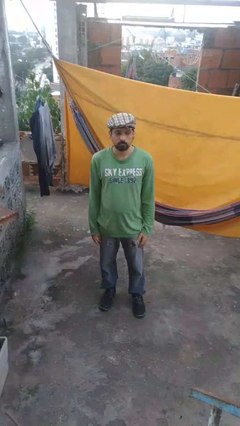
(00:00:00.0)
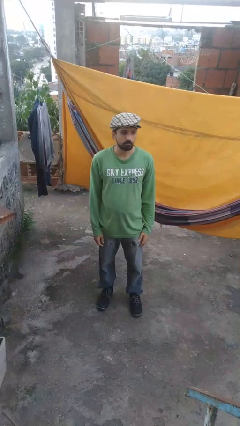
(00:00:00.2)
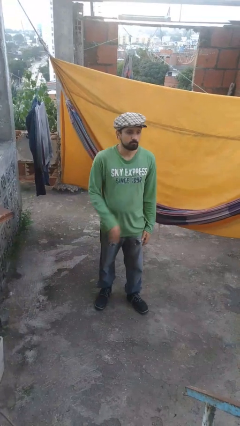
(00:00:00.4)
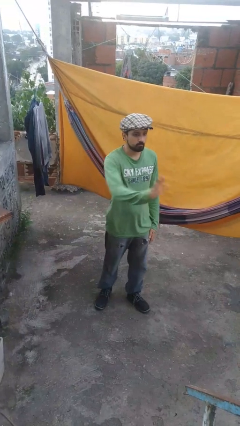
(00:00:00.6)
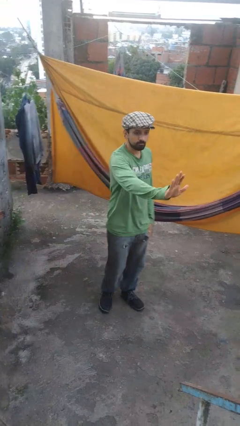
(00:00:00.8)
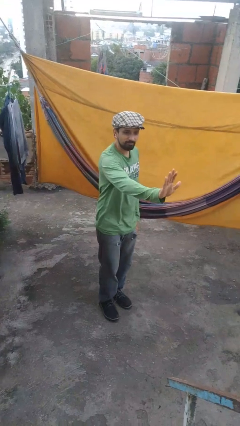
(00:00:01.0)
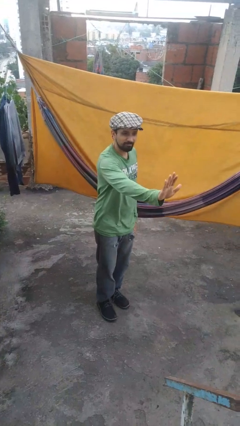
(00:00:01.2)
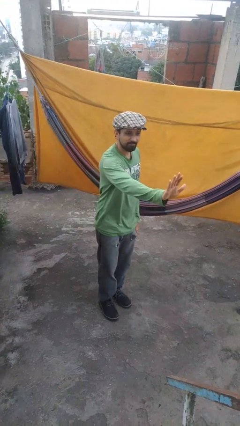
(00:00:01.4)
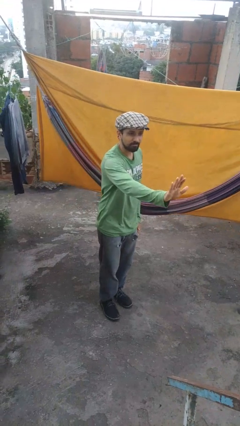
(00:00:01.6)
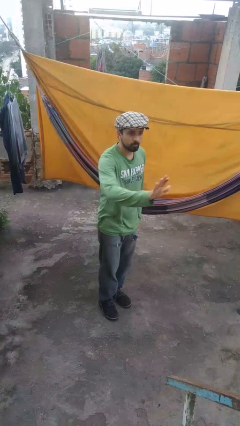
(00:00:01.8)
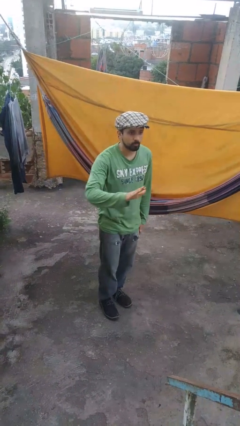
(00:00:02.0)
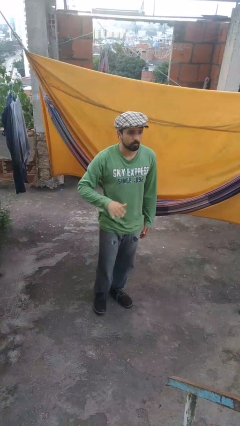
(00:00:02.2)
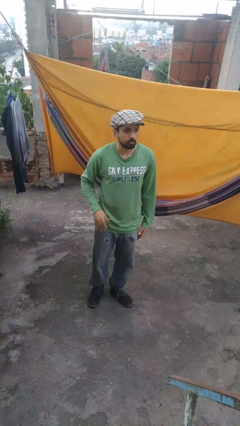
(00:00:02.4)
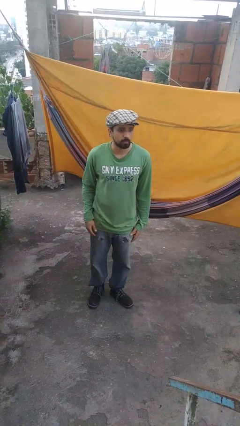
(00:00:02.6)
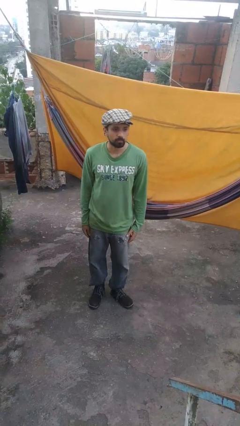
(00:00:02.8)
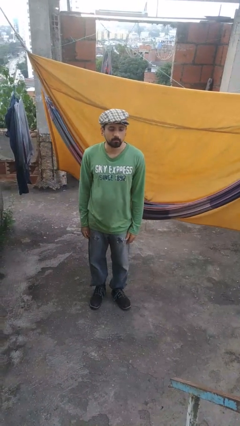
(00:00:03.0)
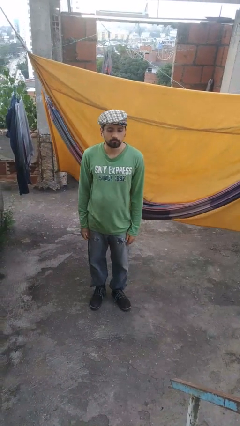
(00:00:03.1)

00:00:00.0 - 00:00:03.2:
person gestures stop

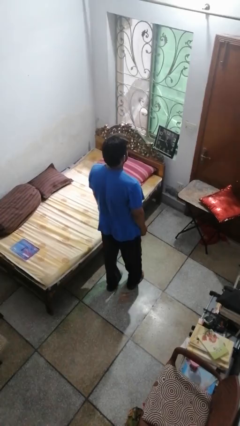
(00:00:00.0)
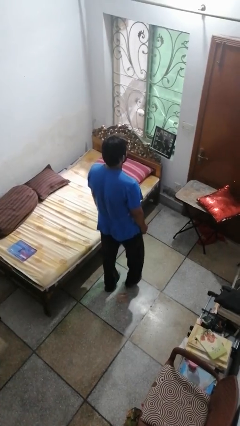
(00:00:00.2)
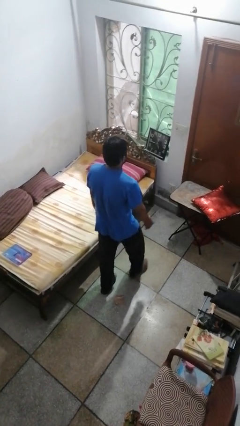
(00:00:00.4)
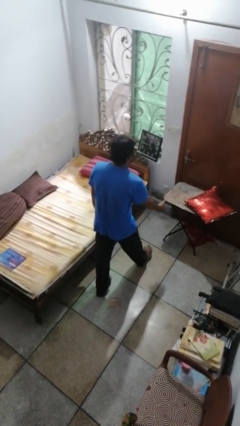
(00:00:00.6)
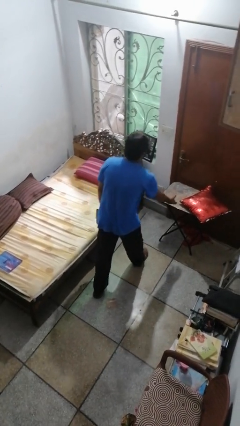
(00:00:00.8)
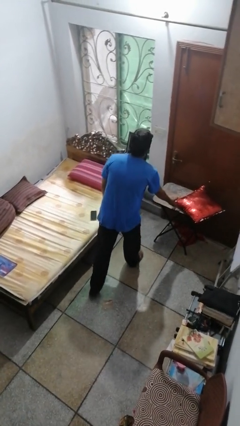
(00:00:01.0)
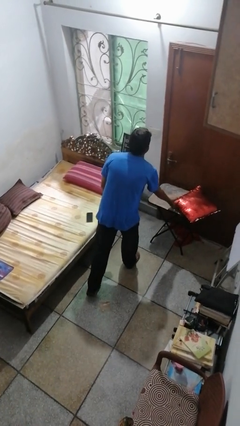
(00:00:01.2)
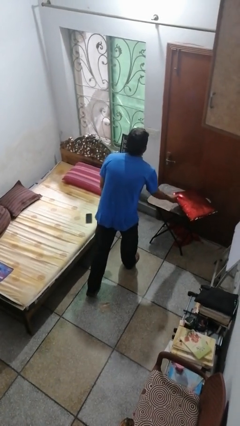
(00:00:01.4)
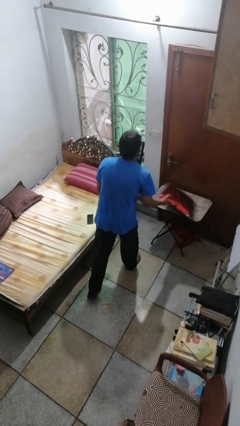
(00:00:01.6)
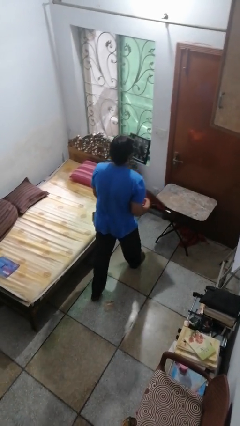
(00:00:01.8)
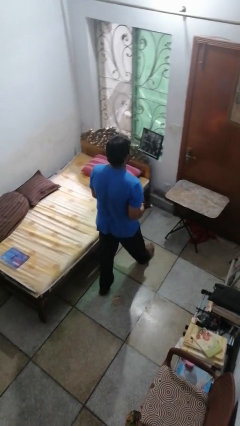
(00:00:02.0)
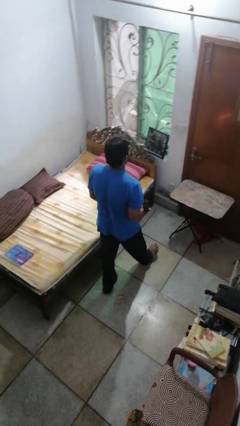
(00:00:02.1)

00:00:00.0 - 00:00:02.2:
person picks up object from table

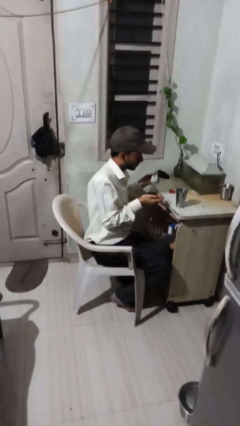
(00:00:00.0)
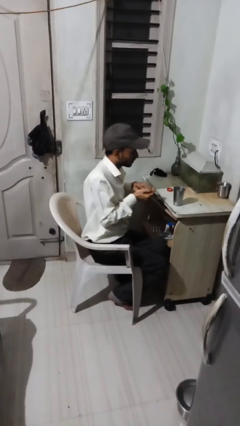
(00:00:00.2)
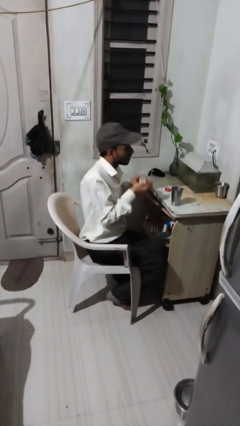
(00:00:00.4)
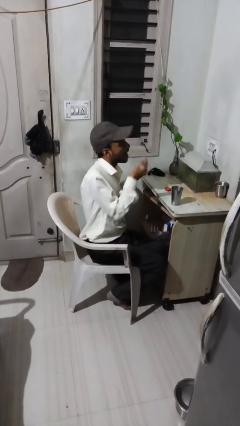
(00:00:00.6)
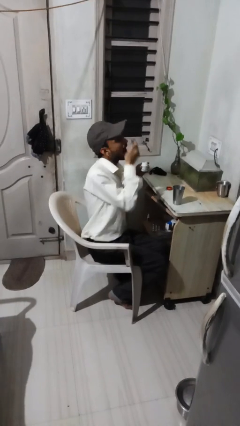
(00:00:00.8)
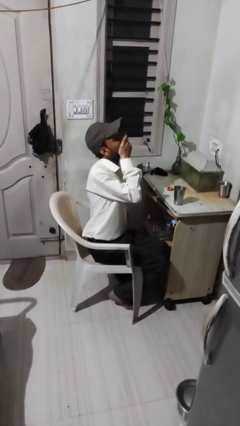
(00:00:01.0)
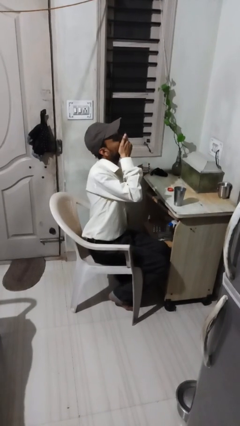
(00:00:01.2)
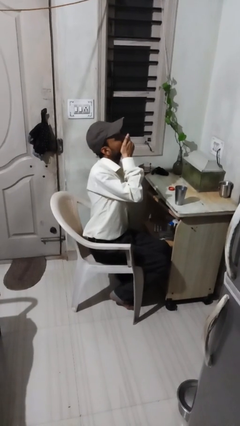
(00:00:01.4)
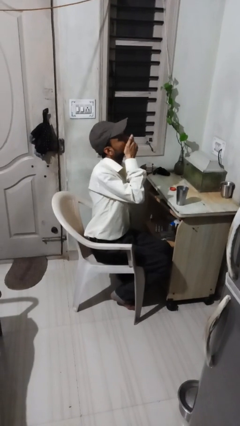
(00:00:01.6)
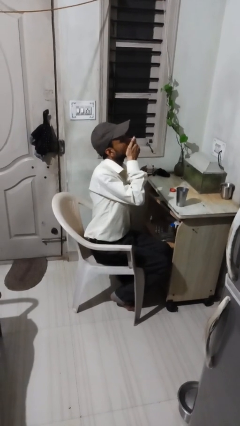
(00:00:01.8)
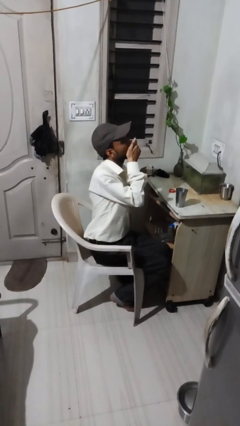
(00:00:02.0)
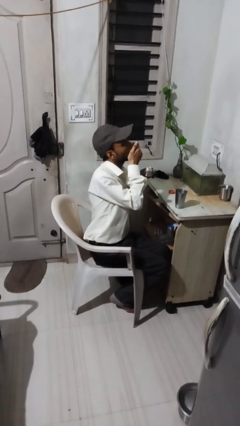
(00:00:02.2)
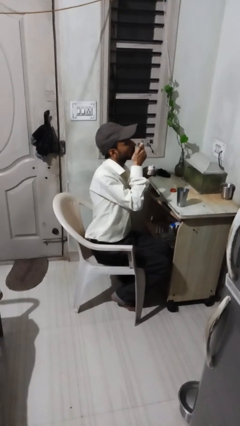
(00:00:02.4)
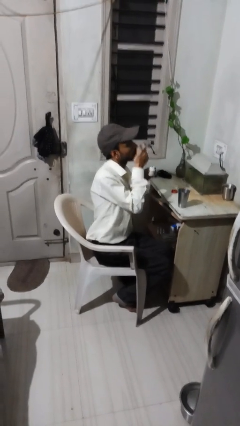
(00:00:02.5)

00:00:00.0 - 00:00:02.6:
person takes medicine pills

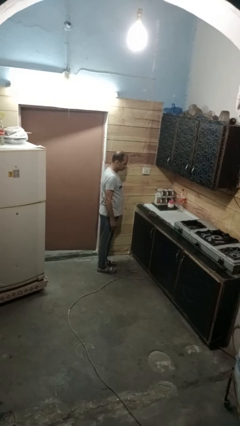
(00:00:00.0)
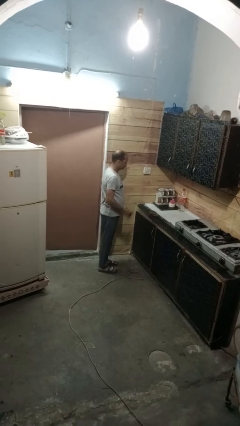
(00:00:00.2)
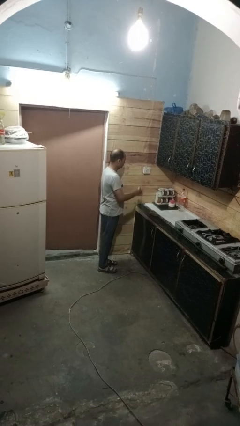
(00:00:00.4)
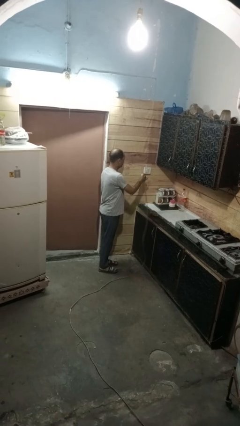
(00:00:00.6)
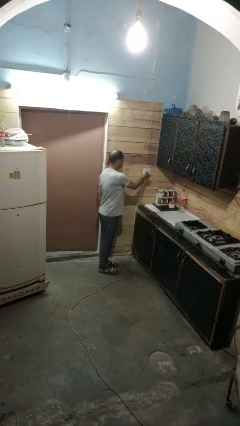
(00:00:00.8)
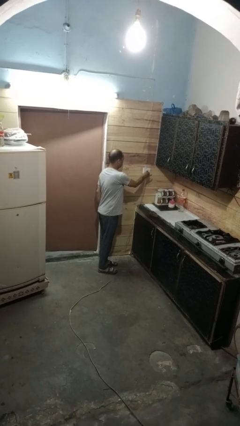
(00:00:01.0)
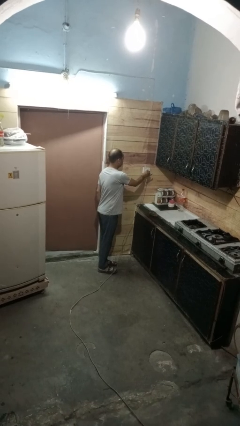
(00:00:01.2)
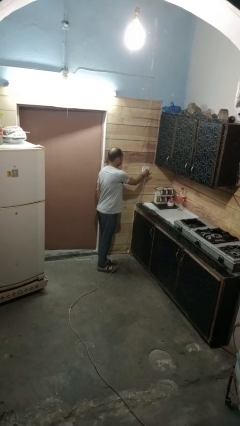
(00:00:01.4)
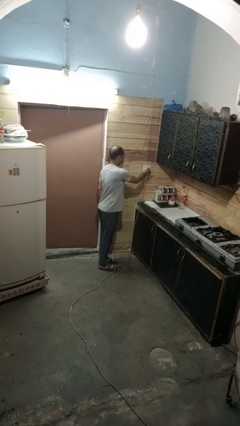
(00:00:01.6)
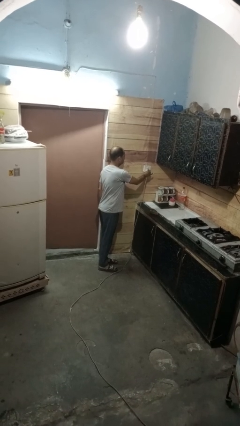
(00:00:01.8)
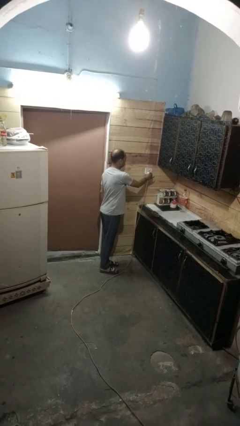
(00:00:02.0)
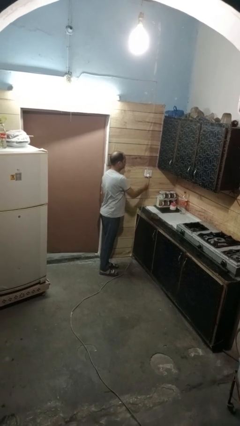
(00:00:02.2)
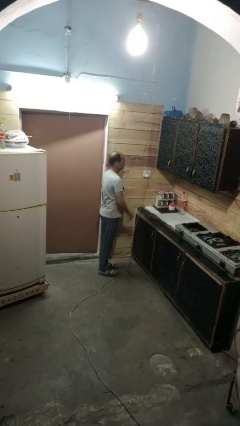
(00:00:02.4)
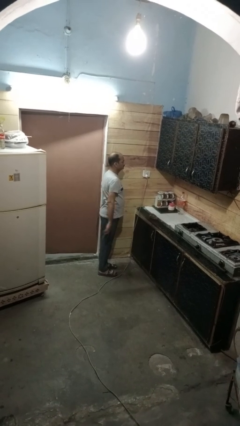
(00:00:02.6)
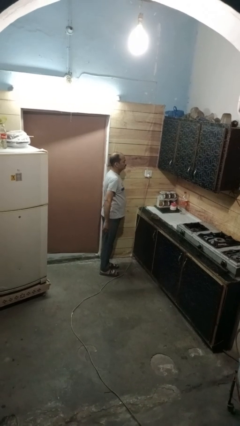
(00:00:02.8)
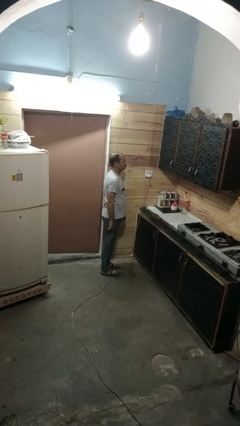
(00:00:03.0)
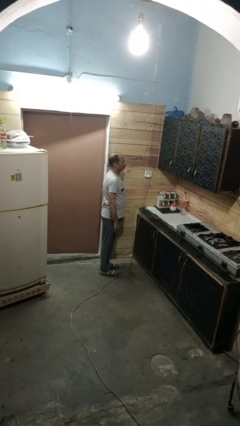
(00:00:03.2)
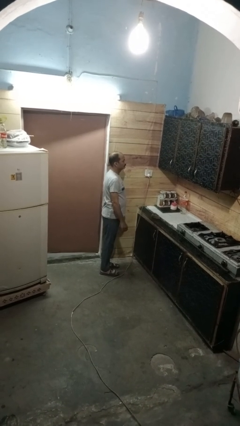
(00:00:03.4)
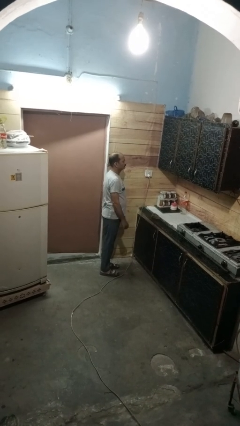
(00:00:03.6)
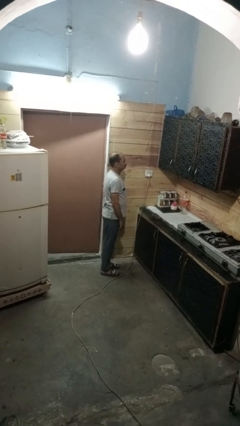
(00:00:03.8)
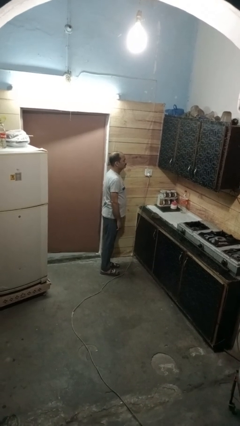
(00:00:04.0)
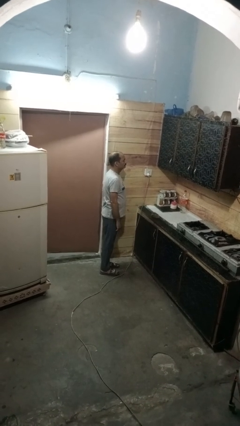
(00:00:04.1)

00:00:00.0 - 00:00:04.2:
person plugs into electrical socket

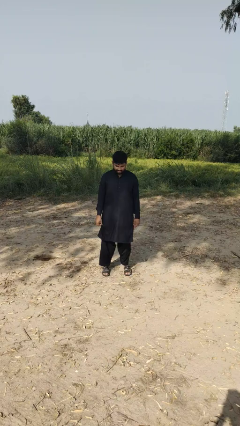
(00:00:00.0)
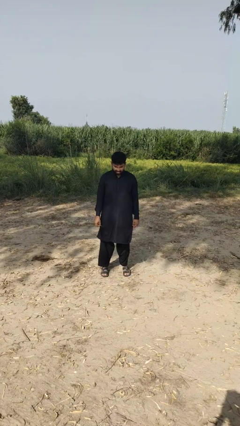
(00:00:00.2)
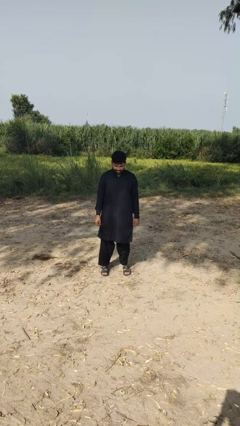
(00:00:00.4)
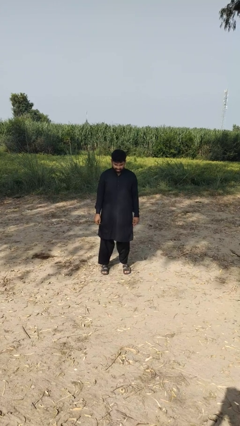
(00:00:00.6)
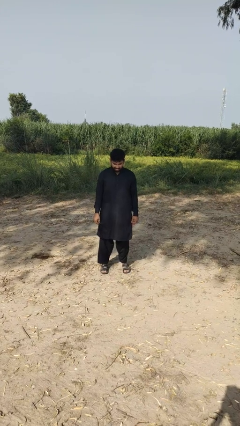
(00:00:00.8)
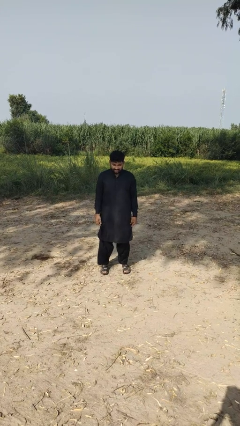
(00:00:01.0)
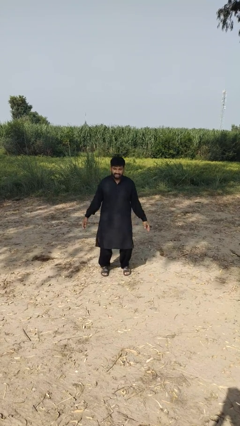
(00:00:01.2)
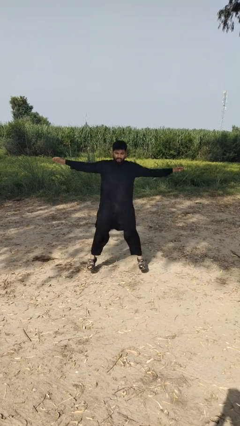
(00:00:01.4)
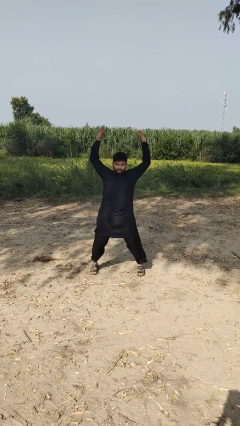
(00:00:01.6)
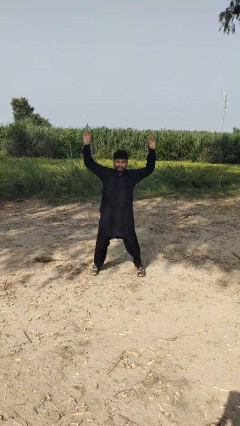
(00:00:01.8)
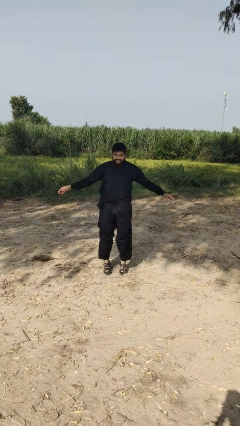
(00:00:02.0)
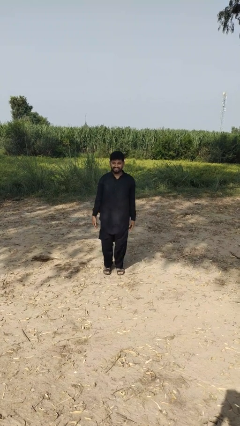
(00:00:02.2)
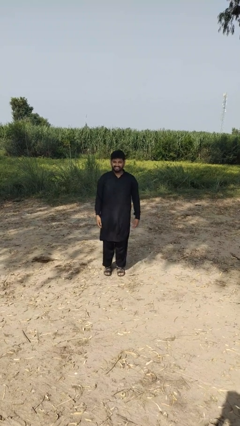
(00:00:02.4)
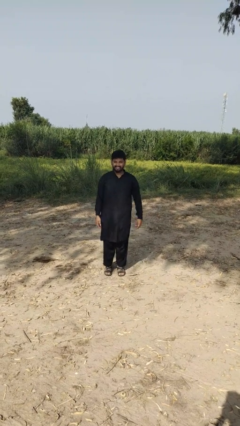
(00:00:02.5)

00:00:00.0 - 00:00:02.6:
person exercises with jumping jacks

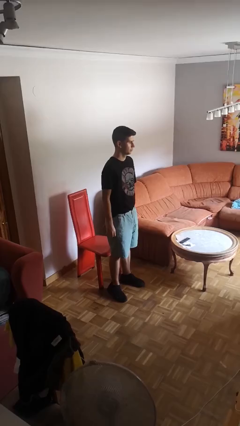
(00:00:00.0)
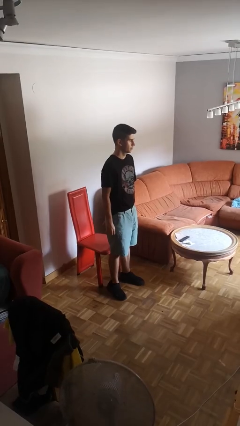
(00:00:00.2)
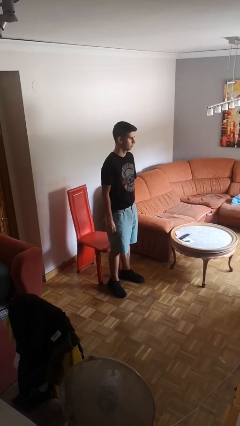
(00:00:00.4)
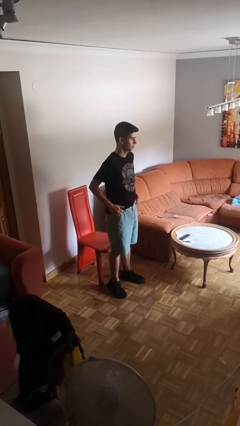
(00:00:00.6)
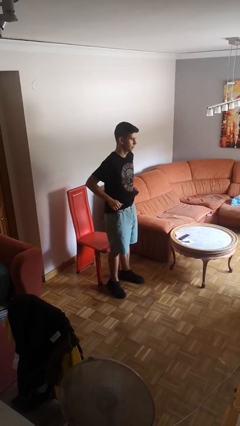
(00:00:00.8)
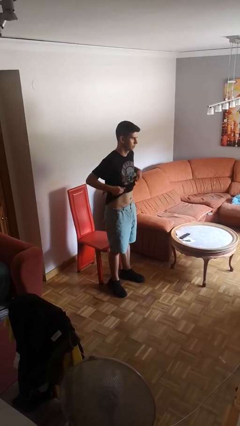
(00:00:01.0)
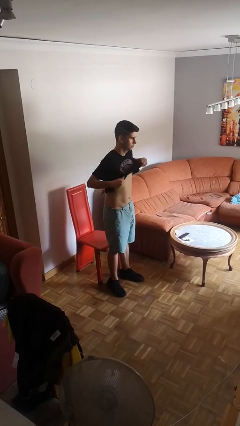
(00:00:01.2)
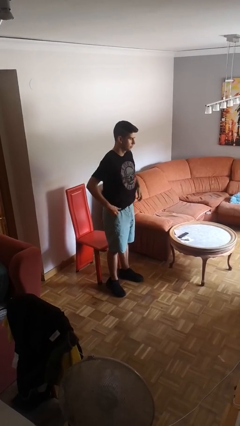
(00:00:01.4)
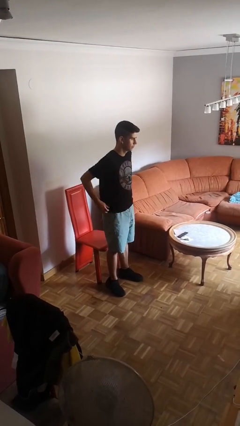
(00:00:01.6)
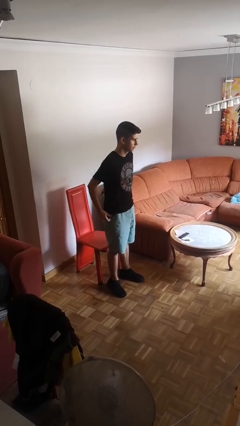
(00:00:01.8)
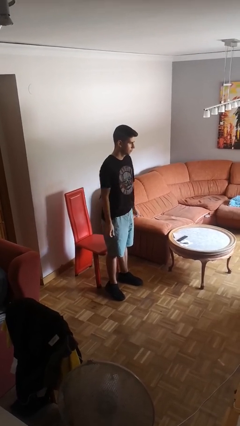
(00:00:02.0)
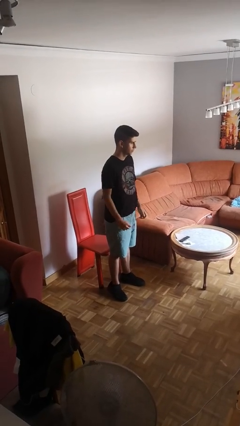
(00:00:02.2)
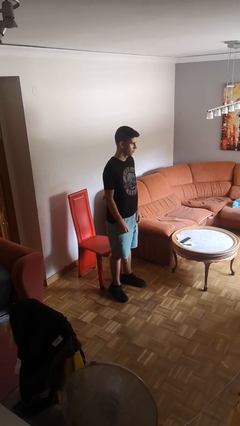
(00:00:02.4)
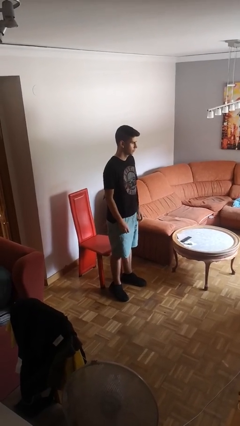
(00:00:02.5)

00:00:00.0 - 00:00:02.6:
person untucks shirt
